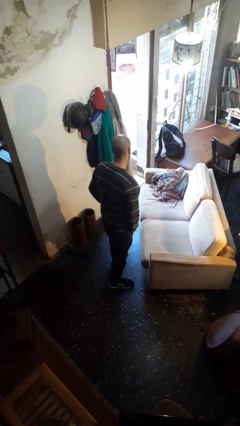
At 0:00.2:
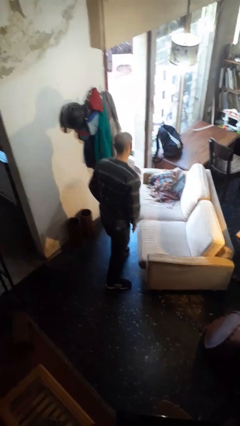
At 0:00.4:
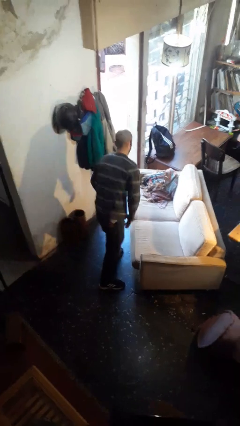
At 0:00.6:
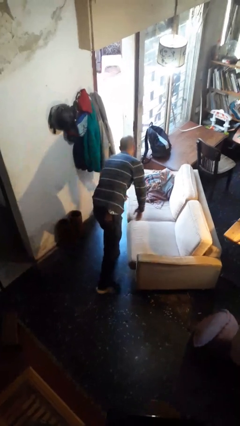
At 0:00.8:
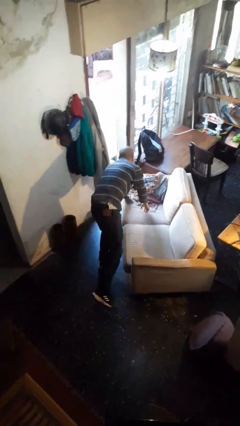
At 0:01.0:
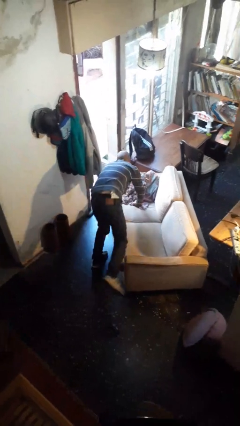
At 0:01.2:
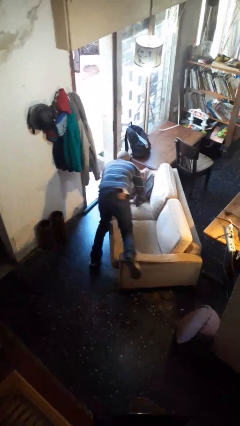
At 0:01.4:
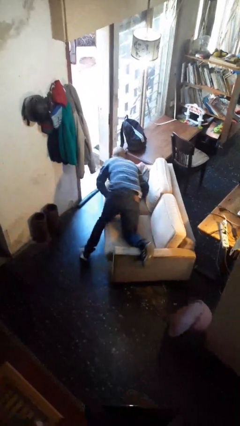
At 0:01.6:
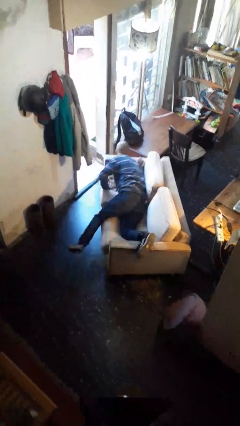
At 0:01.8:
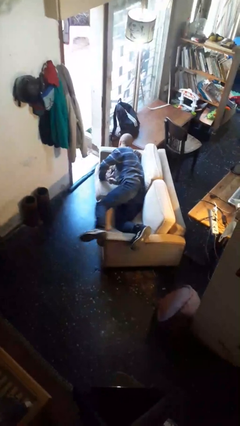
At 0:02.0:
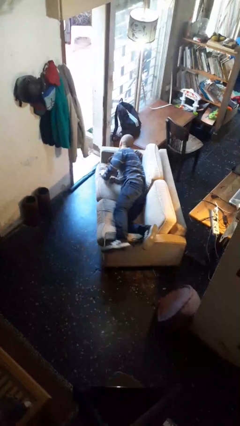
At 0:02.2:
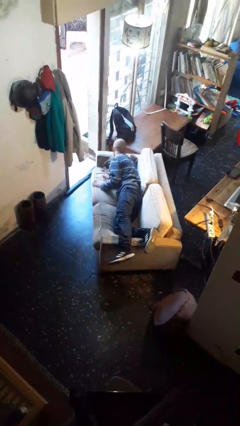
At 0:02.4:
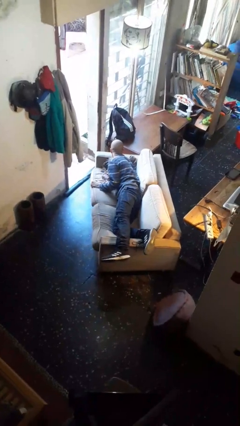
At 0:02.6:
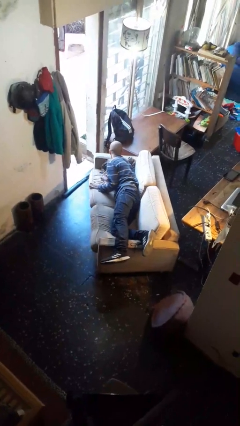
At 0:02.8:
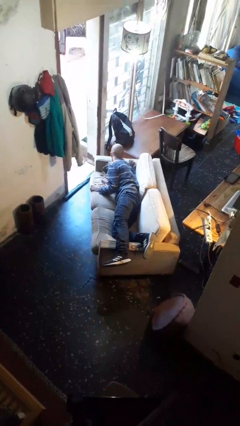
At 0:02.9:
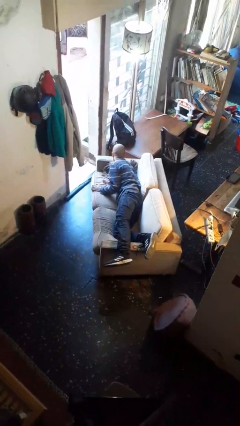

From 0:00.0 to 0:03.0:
person lies down on couch

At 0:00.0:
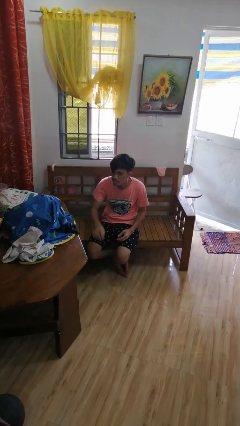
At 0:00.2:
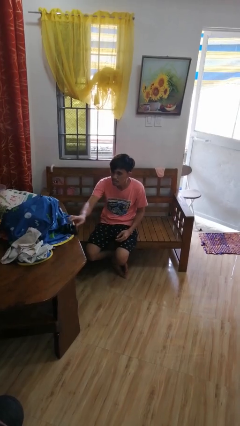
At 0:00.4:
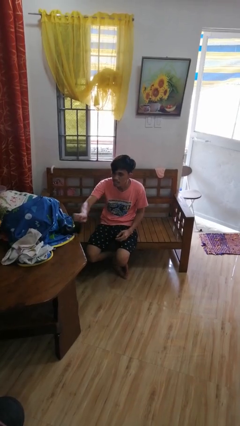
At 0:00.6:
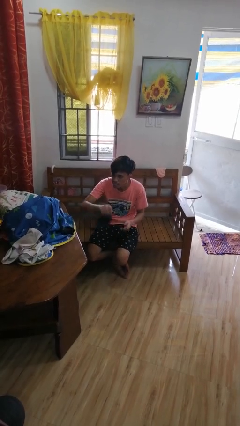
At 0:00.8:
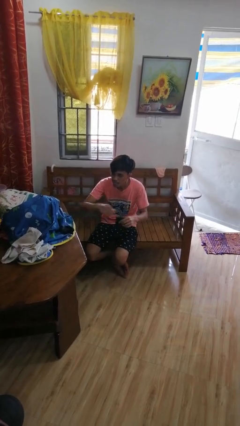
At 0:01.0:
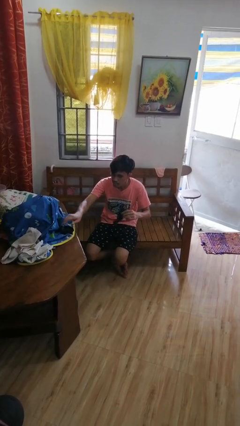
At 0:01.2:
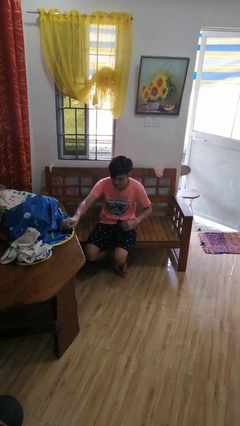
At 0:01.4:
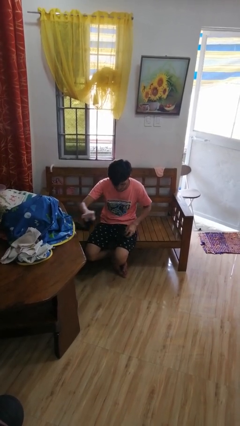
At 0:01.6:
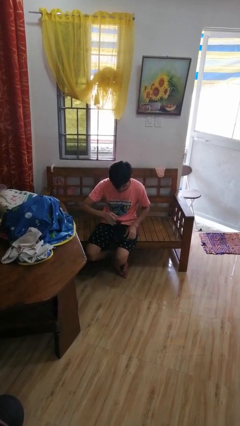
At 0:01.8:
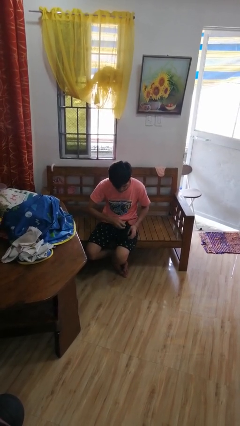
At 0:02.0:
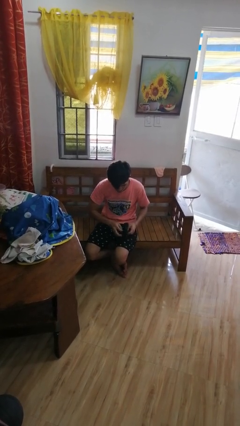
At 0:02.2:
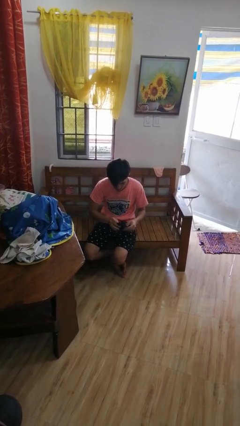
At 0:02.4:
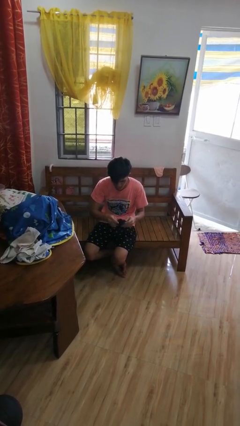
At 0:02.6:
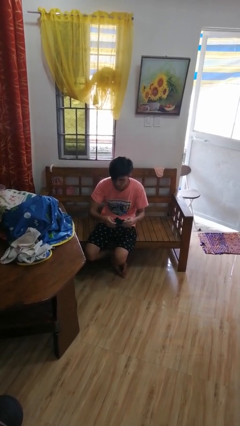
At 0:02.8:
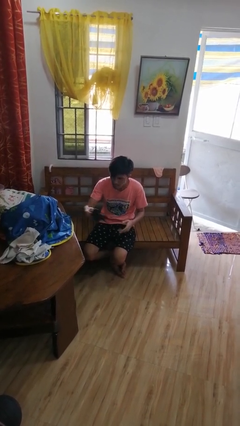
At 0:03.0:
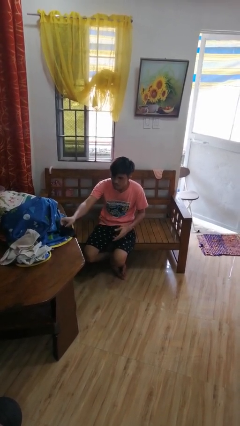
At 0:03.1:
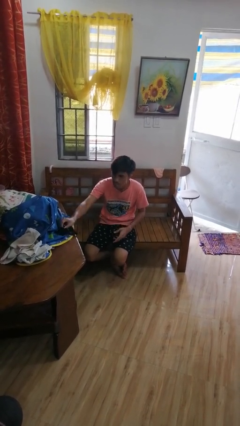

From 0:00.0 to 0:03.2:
person folds socks

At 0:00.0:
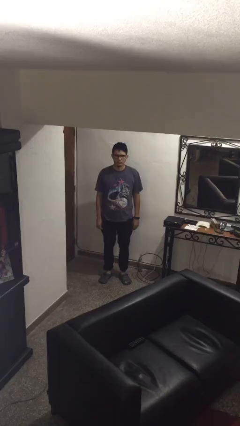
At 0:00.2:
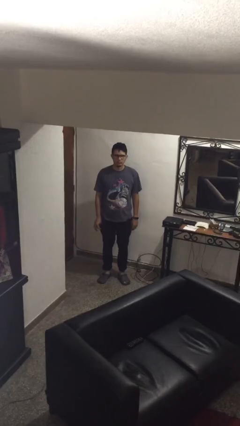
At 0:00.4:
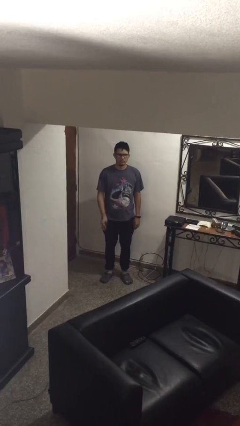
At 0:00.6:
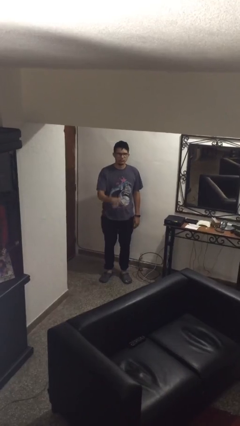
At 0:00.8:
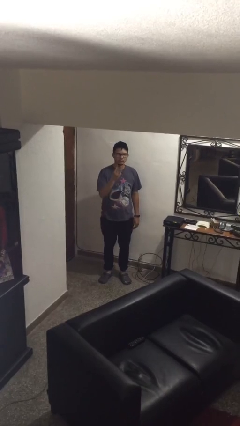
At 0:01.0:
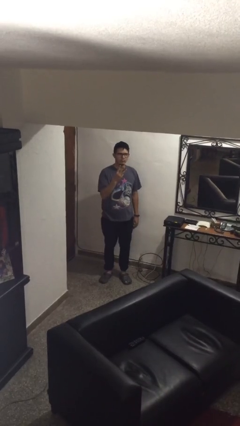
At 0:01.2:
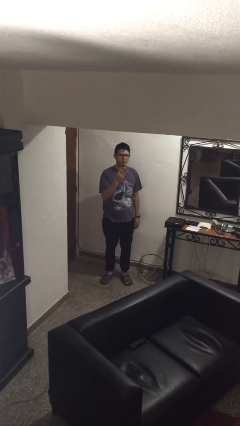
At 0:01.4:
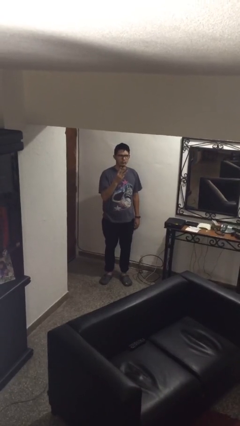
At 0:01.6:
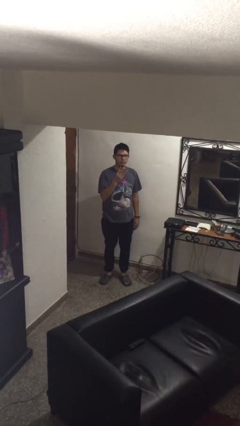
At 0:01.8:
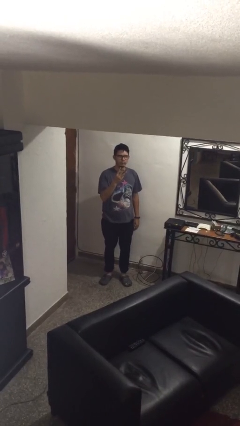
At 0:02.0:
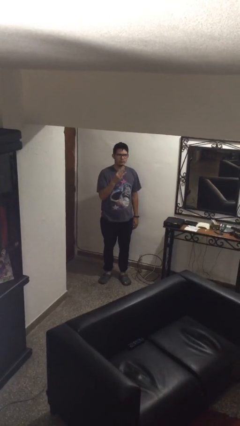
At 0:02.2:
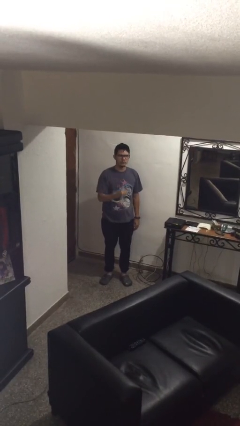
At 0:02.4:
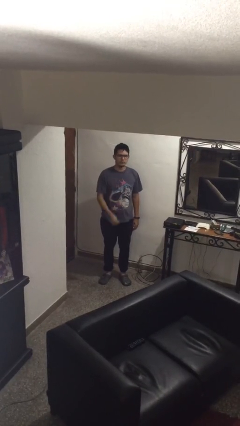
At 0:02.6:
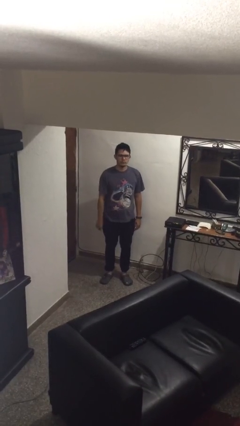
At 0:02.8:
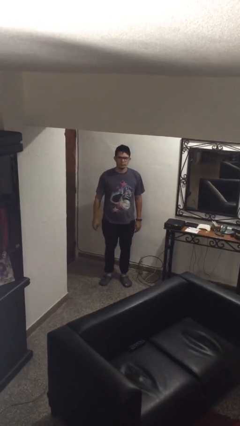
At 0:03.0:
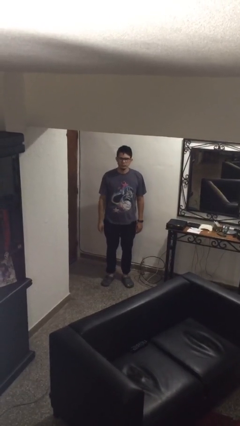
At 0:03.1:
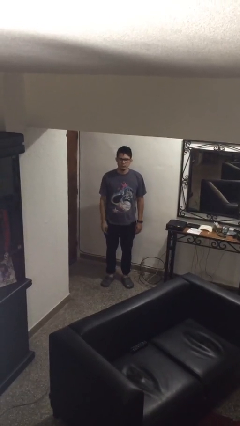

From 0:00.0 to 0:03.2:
person gestures number three

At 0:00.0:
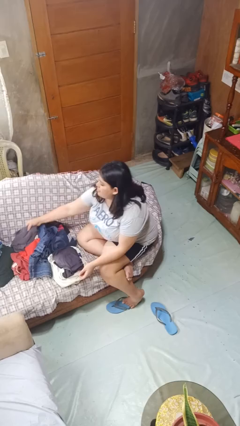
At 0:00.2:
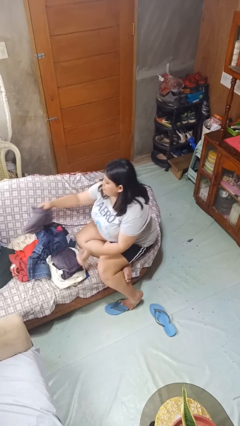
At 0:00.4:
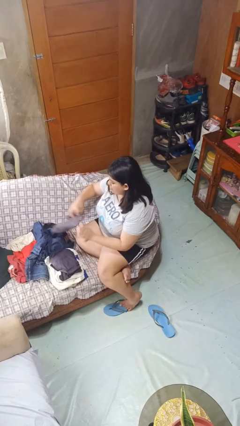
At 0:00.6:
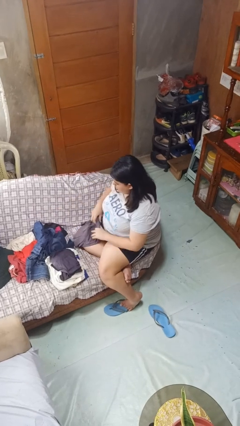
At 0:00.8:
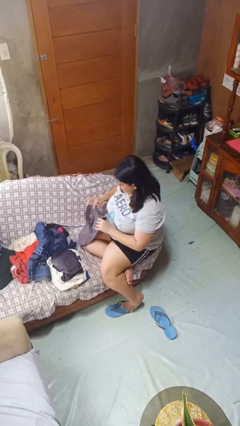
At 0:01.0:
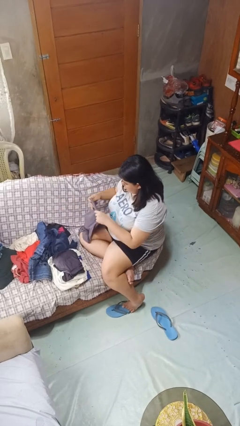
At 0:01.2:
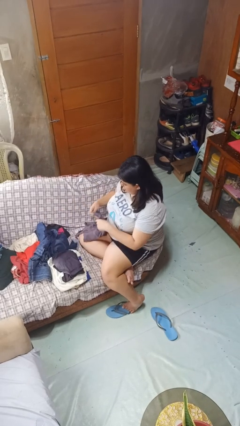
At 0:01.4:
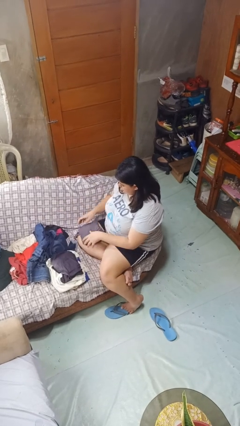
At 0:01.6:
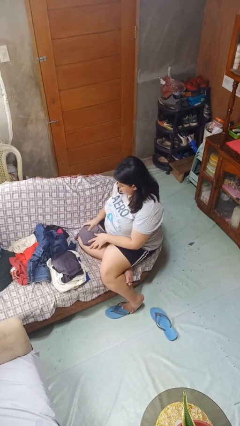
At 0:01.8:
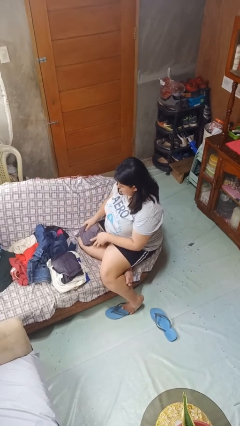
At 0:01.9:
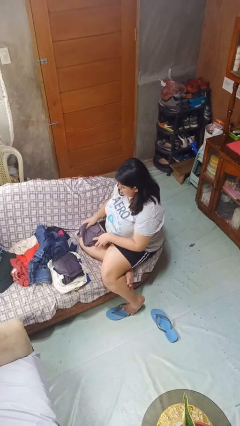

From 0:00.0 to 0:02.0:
person folds shirt

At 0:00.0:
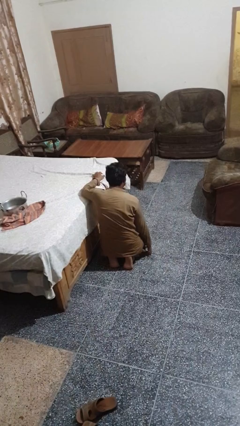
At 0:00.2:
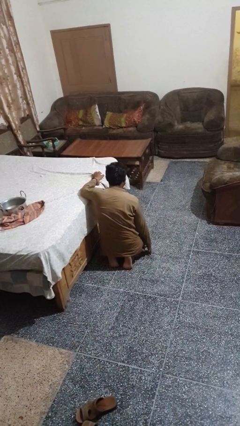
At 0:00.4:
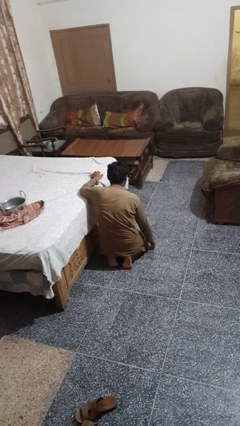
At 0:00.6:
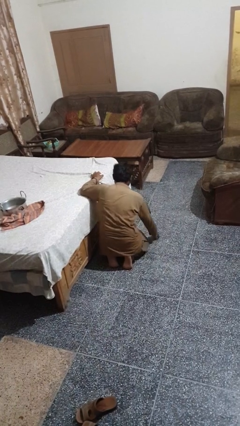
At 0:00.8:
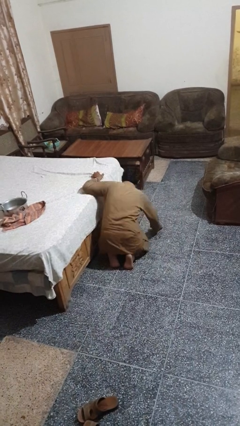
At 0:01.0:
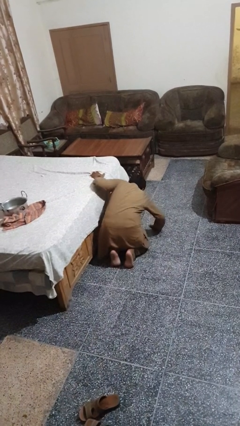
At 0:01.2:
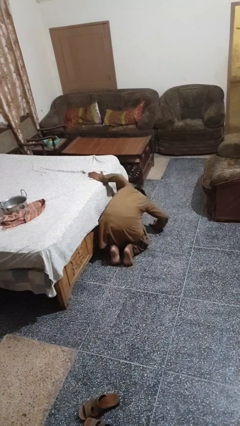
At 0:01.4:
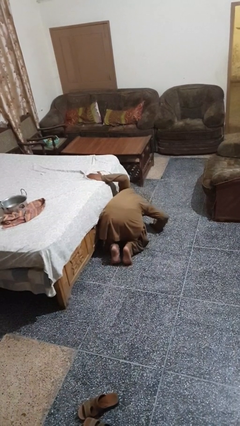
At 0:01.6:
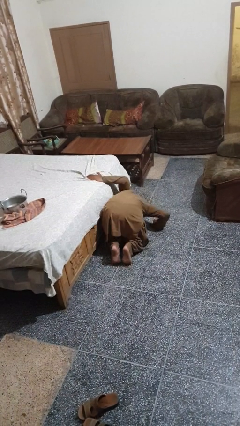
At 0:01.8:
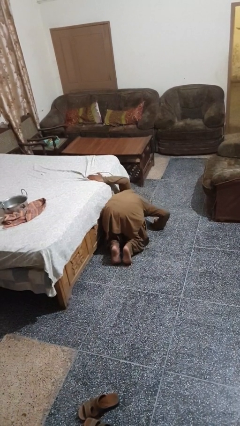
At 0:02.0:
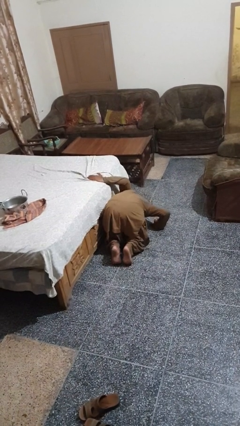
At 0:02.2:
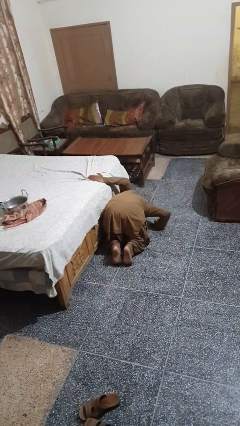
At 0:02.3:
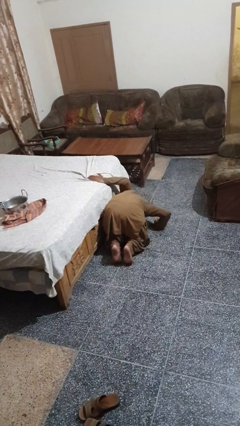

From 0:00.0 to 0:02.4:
person searches under bed

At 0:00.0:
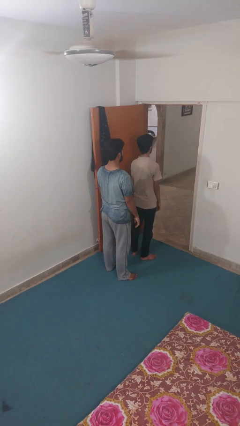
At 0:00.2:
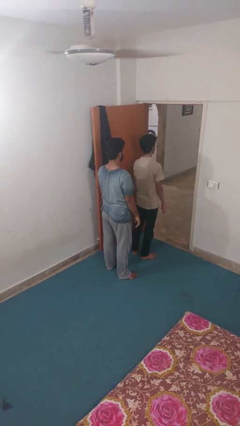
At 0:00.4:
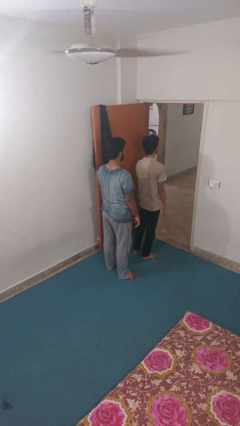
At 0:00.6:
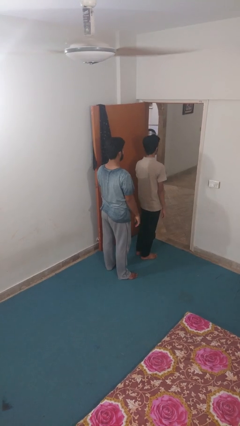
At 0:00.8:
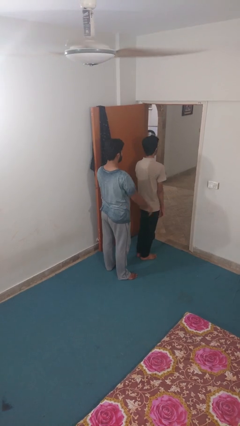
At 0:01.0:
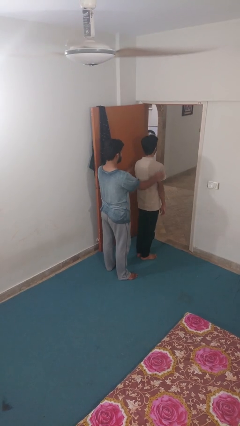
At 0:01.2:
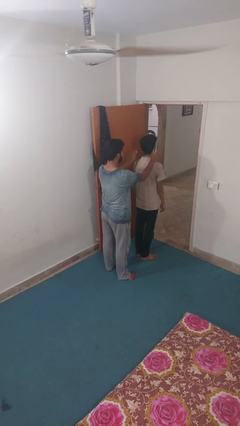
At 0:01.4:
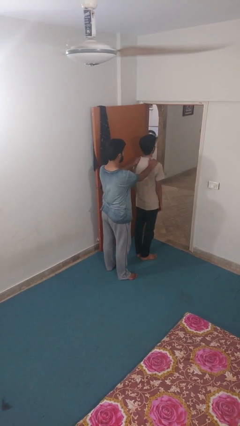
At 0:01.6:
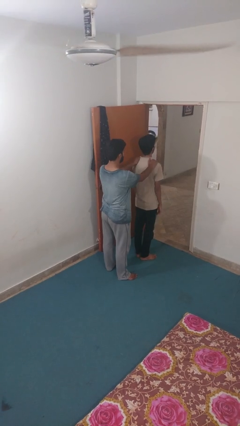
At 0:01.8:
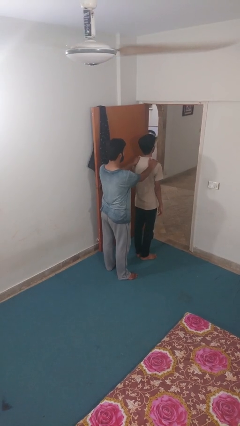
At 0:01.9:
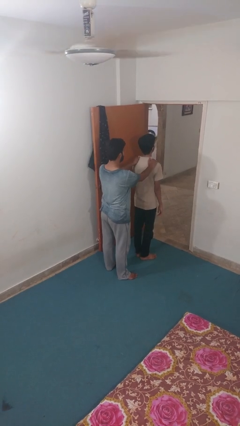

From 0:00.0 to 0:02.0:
person grabs person by shoulder

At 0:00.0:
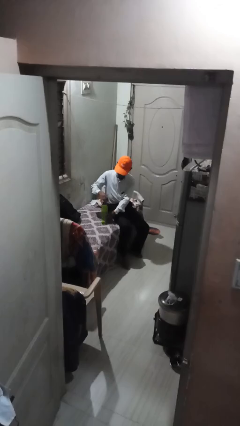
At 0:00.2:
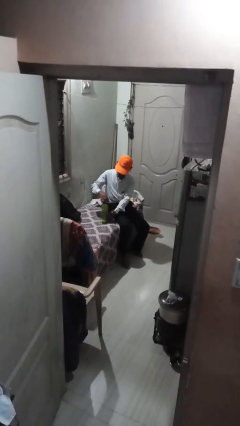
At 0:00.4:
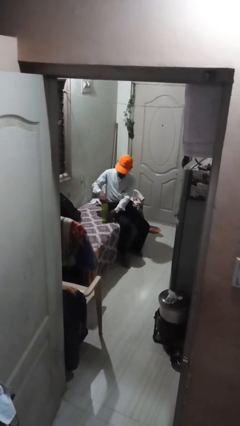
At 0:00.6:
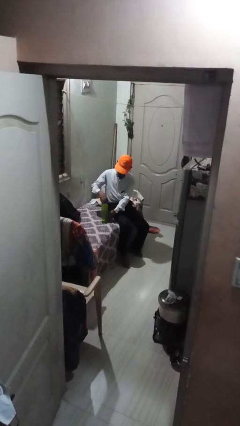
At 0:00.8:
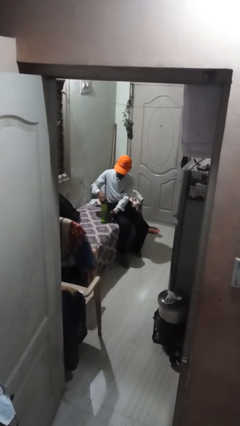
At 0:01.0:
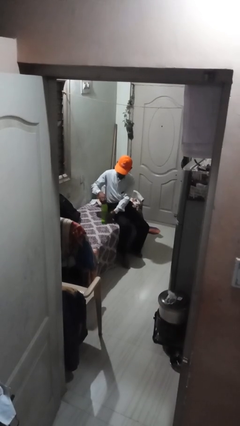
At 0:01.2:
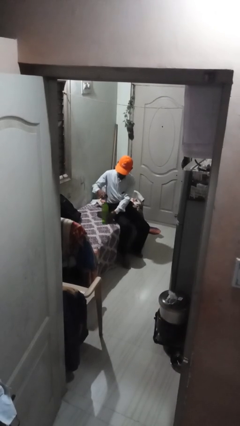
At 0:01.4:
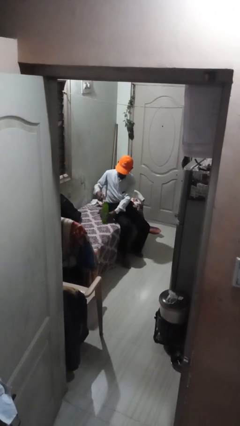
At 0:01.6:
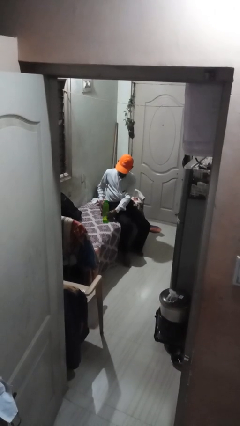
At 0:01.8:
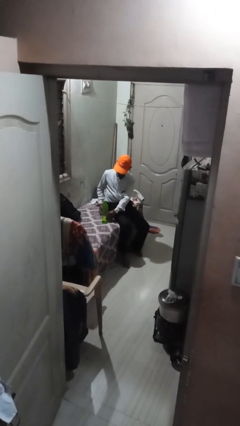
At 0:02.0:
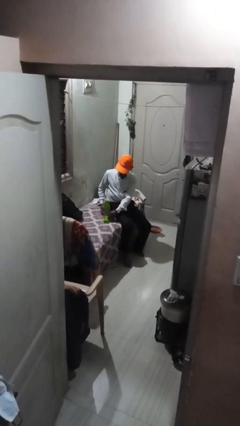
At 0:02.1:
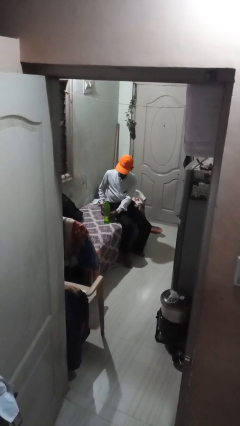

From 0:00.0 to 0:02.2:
person unscrews lid from bottle
